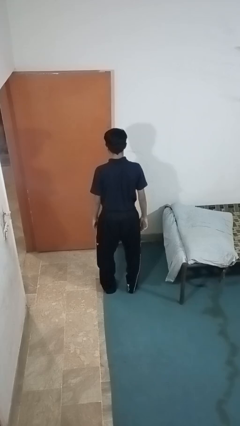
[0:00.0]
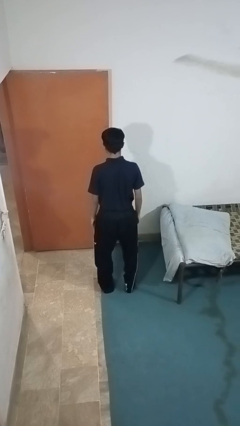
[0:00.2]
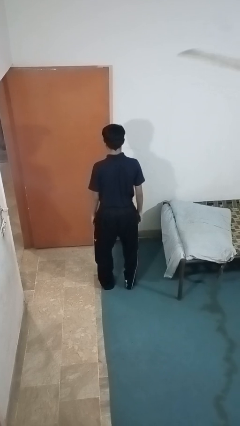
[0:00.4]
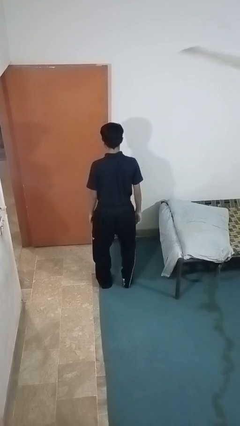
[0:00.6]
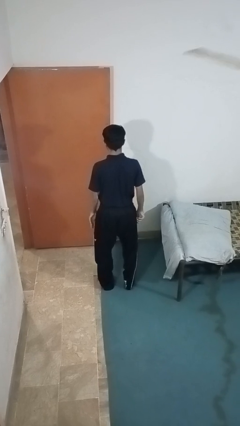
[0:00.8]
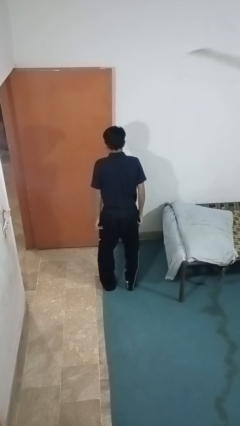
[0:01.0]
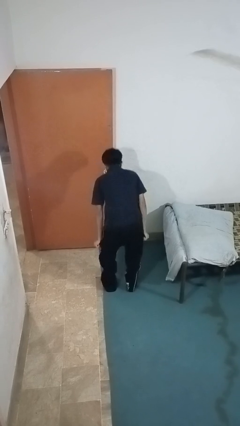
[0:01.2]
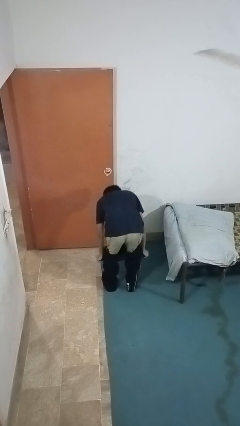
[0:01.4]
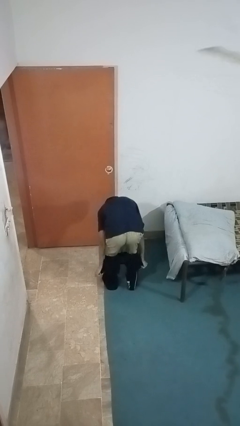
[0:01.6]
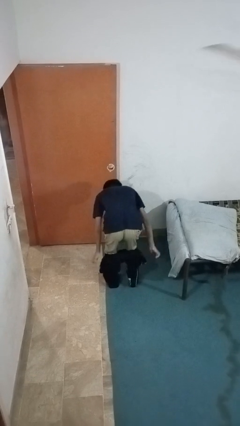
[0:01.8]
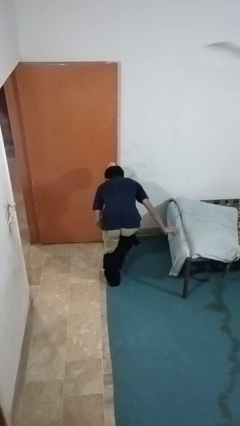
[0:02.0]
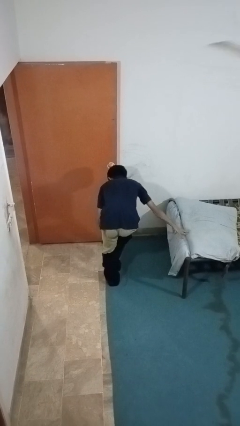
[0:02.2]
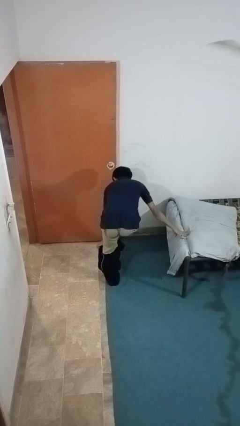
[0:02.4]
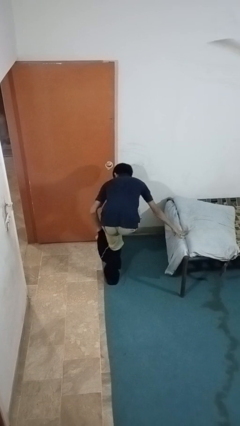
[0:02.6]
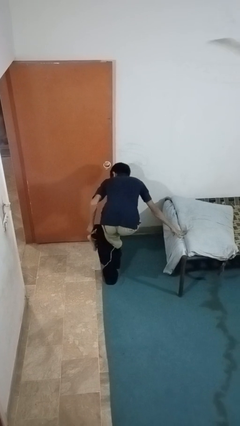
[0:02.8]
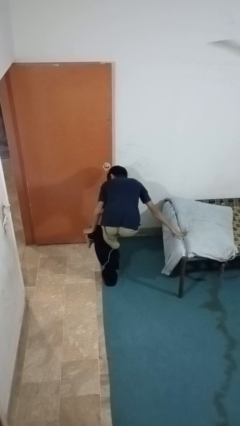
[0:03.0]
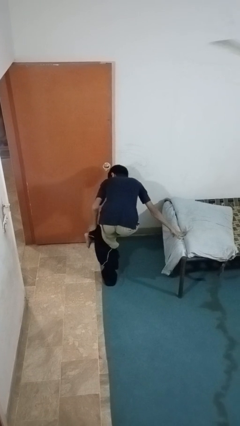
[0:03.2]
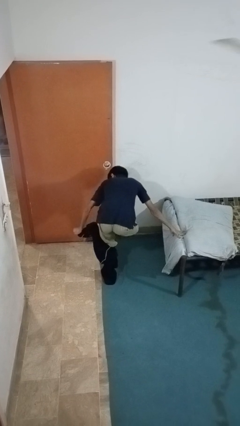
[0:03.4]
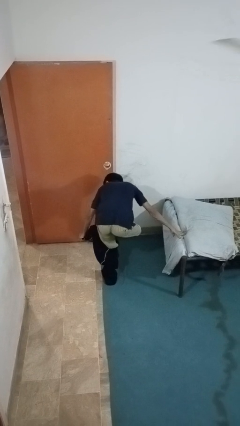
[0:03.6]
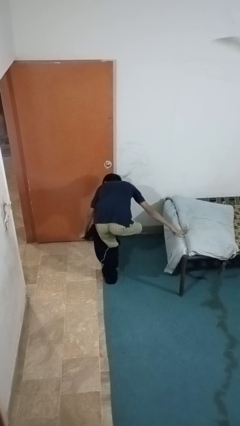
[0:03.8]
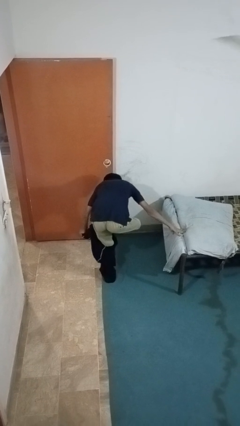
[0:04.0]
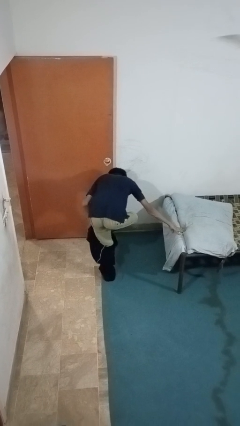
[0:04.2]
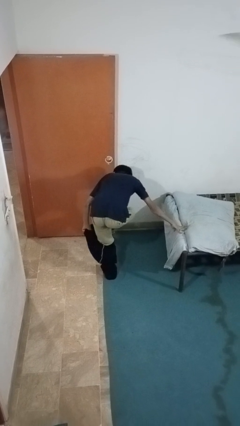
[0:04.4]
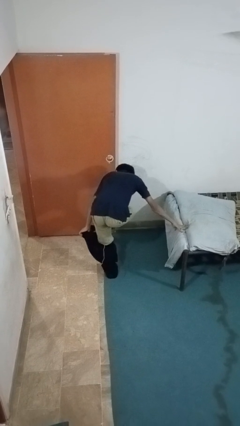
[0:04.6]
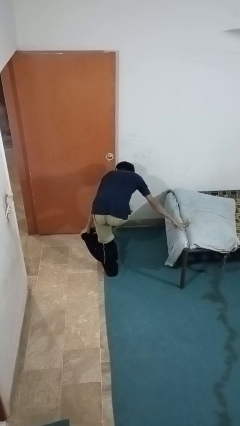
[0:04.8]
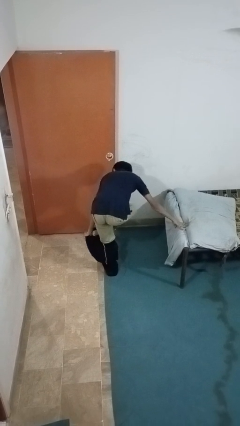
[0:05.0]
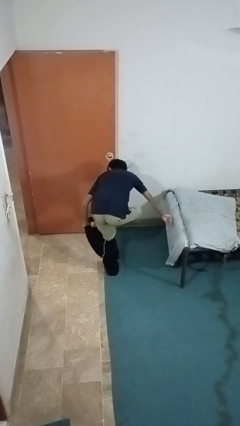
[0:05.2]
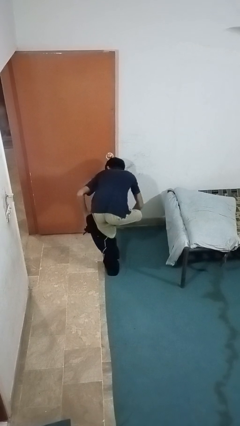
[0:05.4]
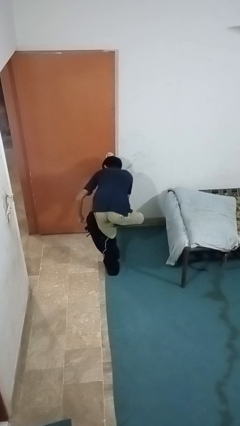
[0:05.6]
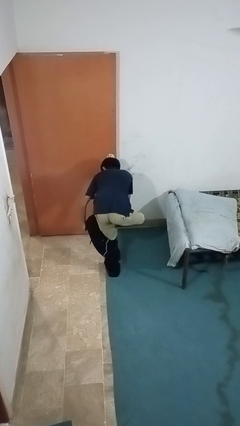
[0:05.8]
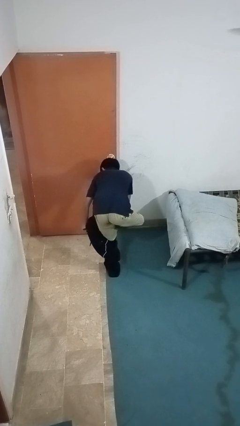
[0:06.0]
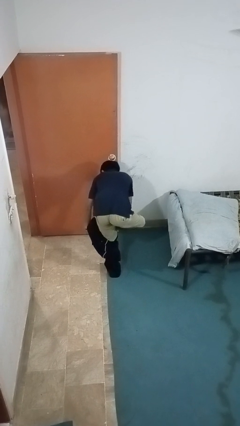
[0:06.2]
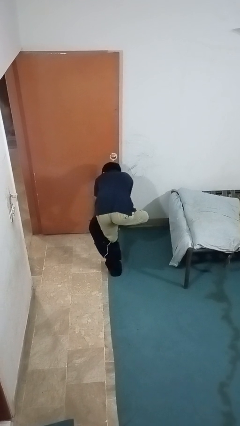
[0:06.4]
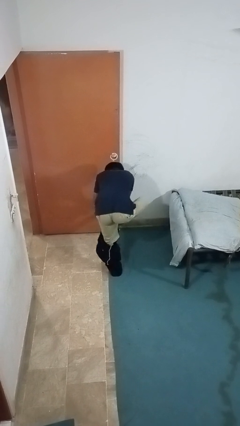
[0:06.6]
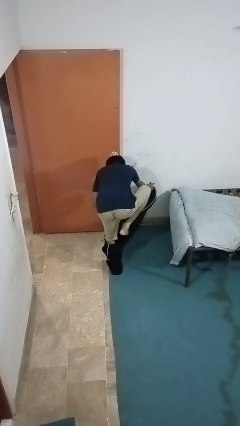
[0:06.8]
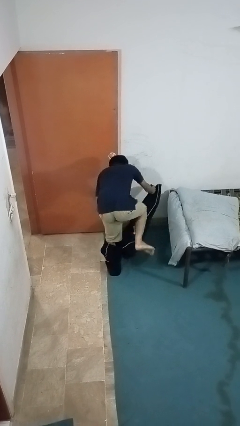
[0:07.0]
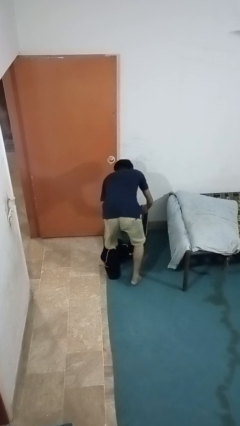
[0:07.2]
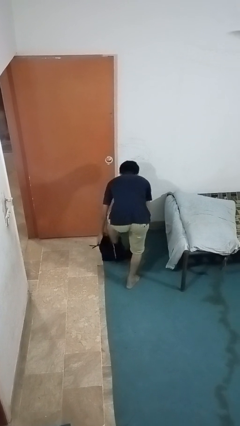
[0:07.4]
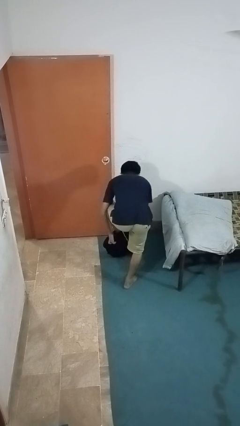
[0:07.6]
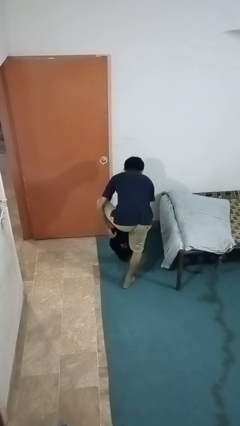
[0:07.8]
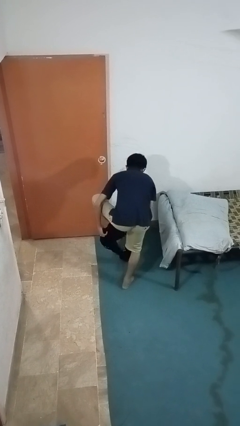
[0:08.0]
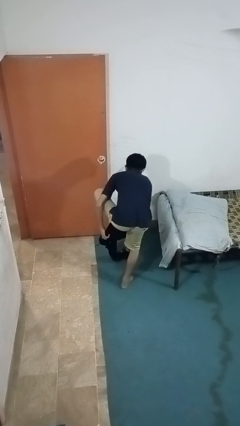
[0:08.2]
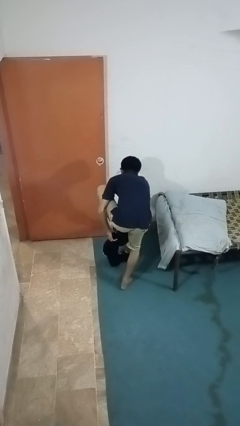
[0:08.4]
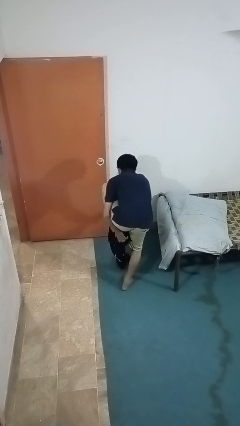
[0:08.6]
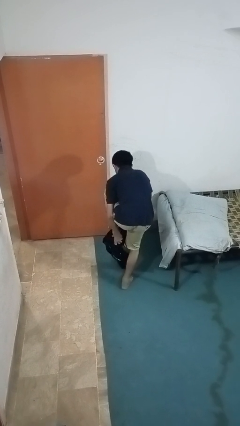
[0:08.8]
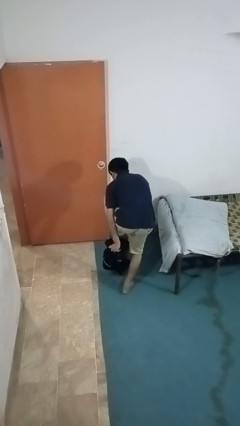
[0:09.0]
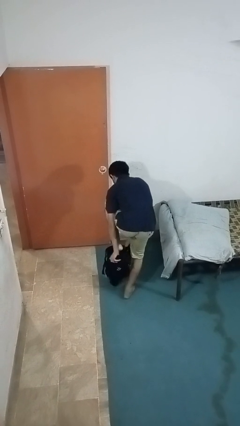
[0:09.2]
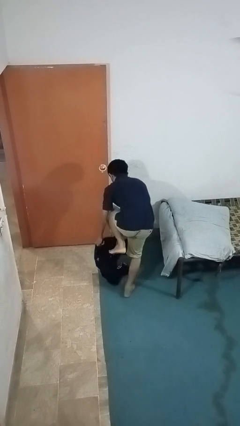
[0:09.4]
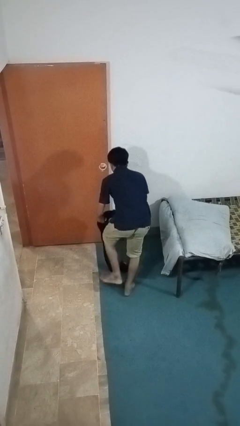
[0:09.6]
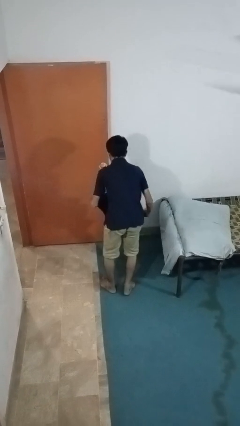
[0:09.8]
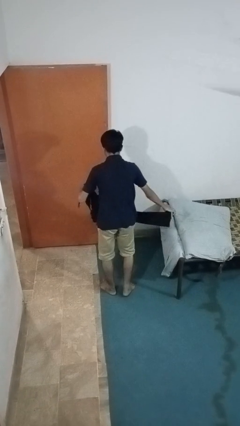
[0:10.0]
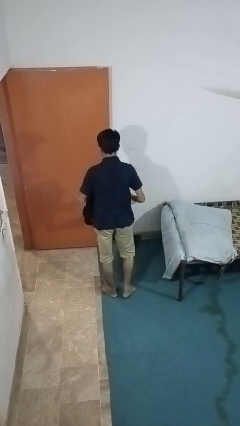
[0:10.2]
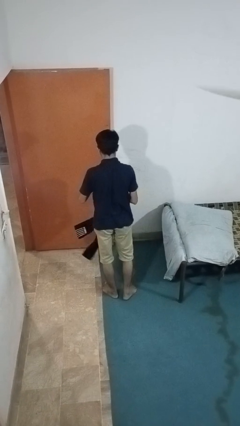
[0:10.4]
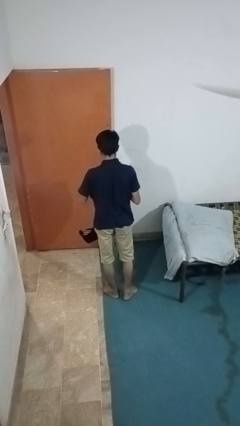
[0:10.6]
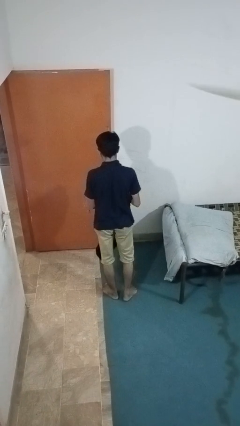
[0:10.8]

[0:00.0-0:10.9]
person takes off pants

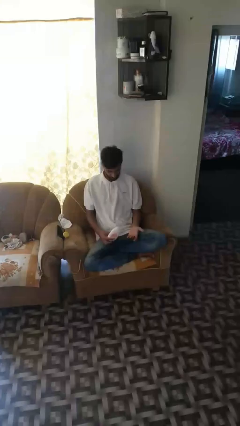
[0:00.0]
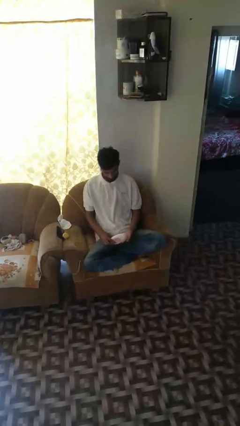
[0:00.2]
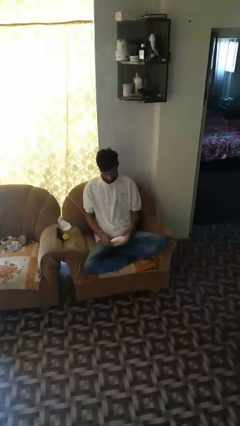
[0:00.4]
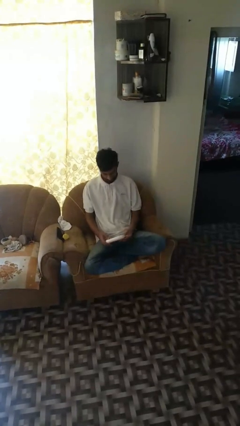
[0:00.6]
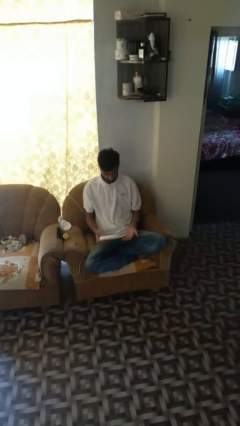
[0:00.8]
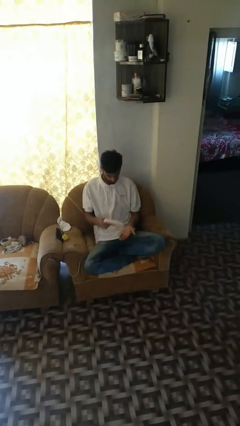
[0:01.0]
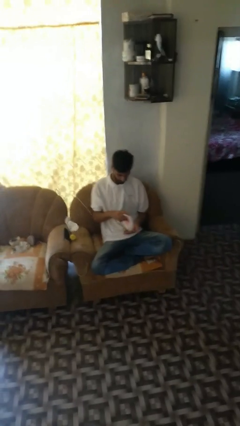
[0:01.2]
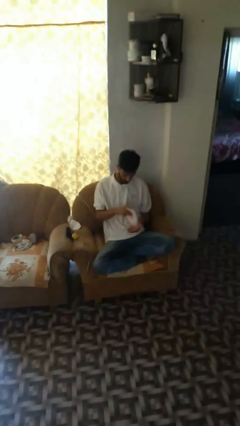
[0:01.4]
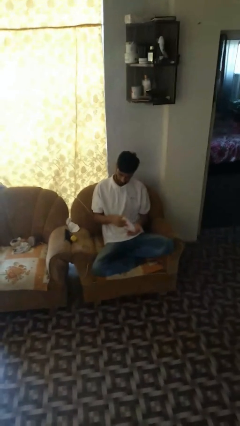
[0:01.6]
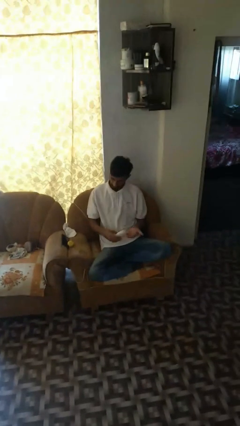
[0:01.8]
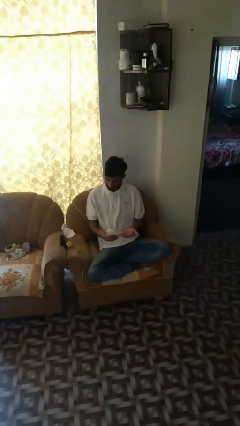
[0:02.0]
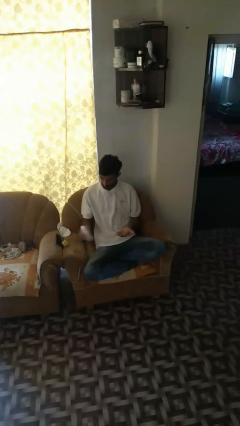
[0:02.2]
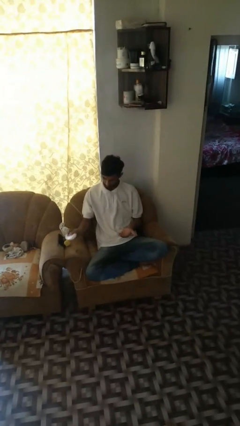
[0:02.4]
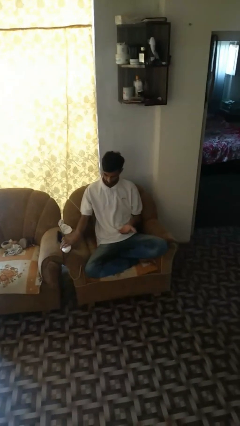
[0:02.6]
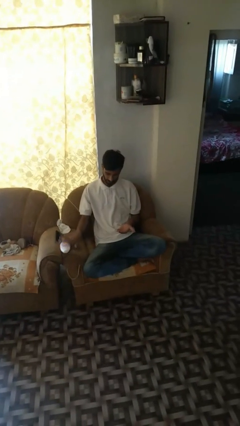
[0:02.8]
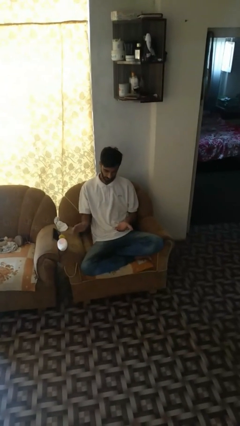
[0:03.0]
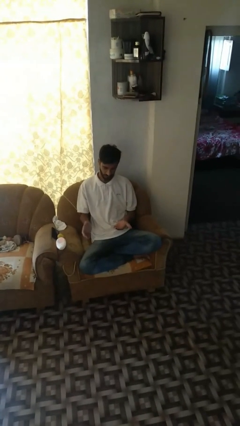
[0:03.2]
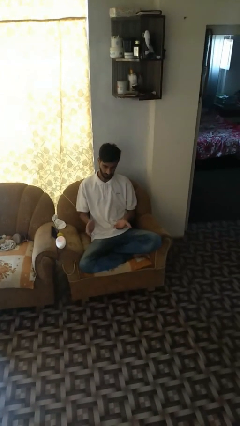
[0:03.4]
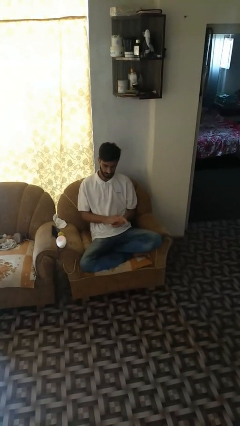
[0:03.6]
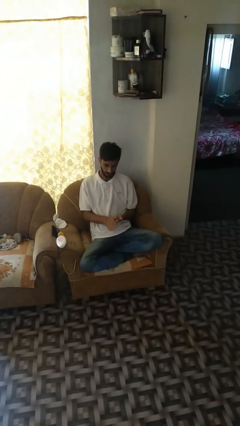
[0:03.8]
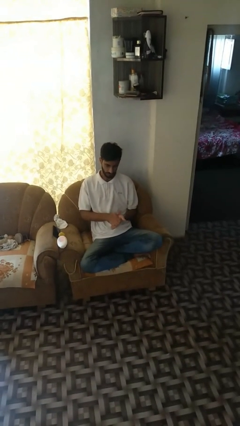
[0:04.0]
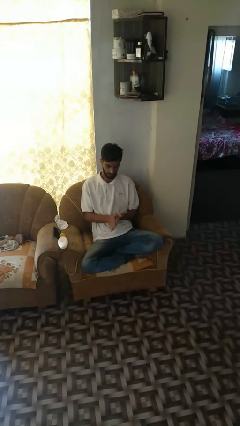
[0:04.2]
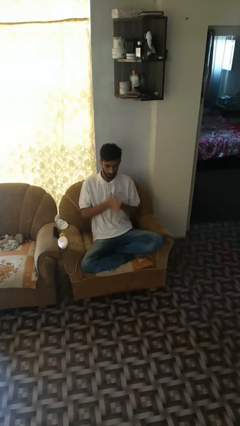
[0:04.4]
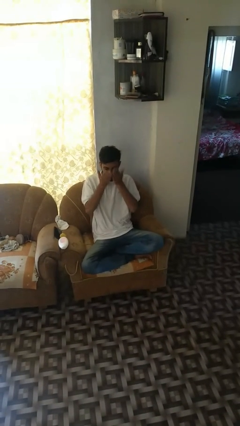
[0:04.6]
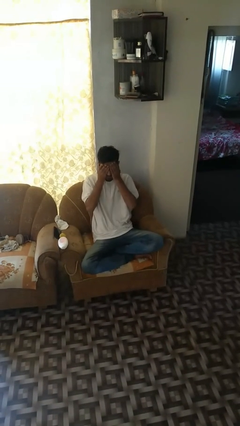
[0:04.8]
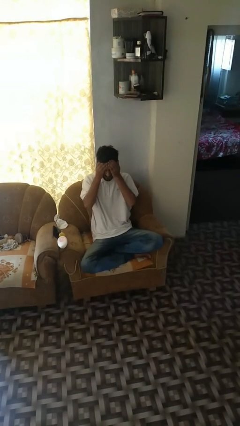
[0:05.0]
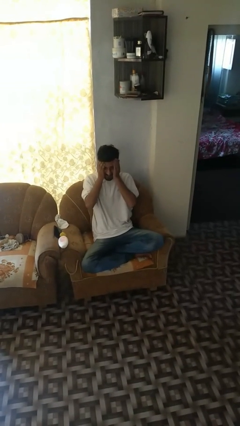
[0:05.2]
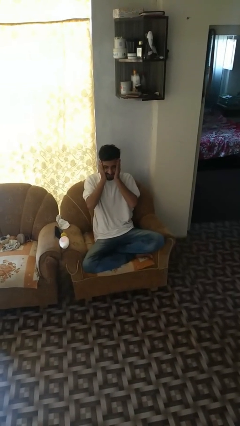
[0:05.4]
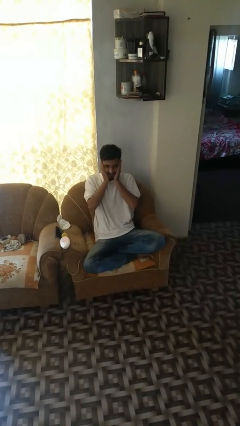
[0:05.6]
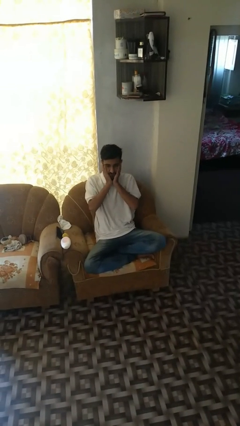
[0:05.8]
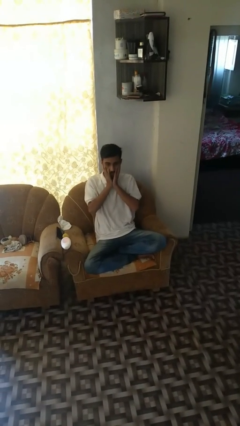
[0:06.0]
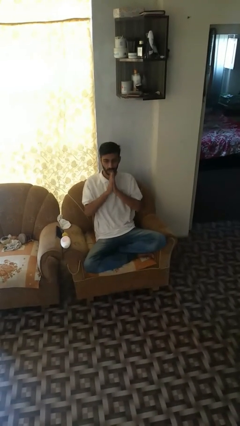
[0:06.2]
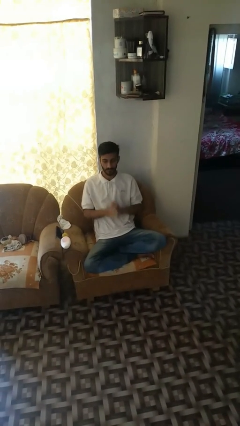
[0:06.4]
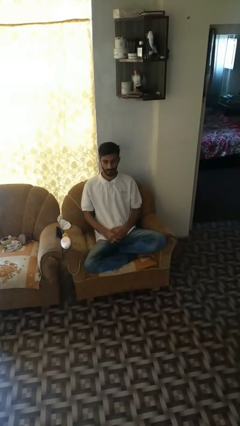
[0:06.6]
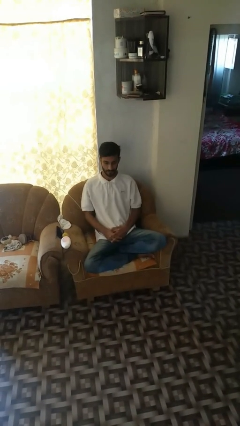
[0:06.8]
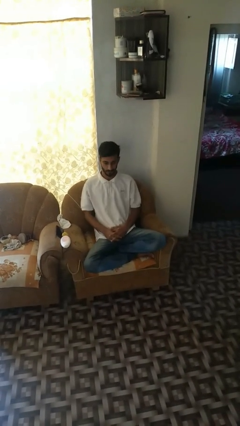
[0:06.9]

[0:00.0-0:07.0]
person applies sunscreen
